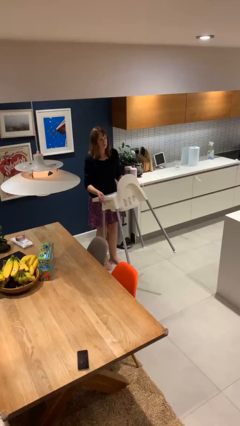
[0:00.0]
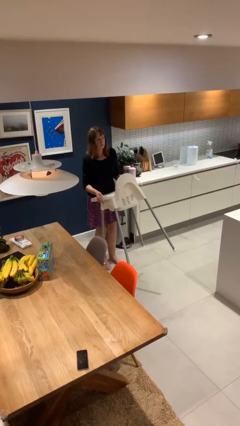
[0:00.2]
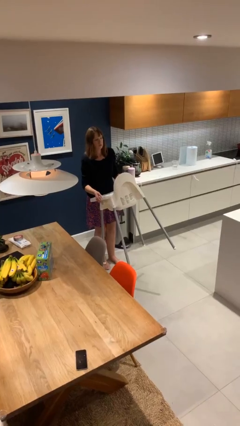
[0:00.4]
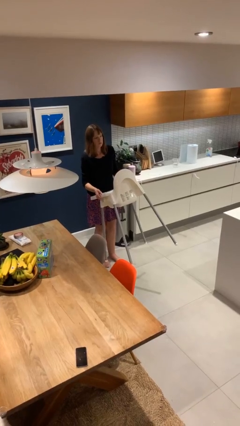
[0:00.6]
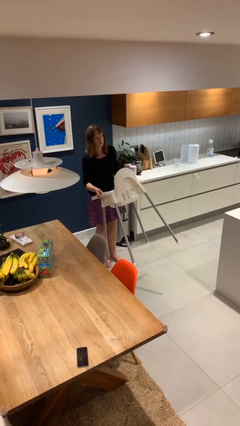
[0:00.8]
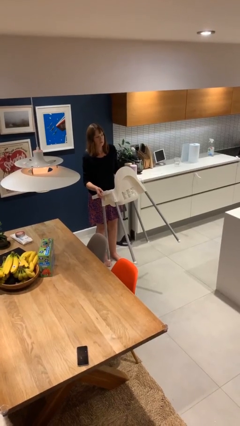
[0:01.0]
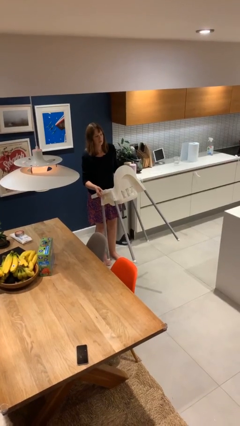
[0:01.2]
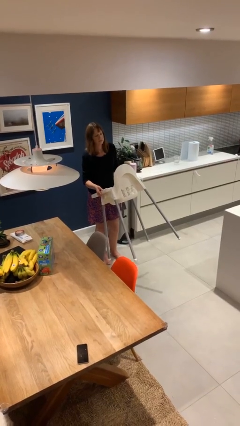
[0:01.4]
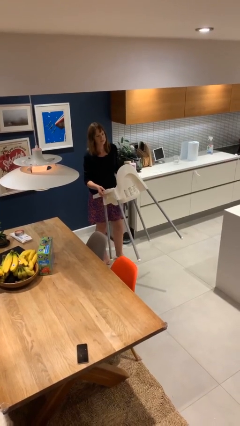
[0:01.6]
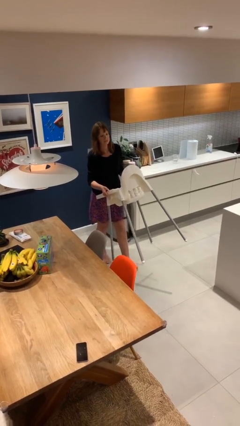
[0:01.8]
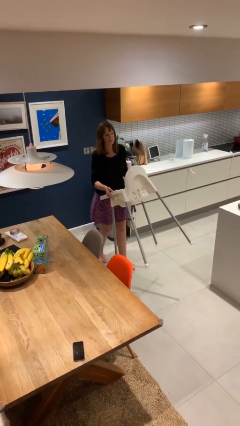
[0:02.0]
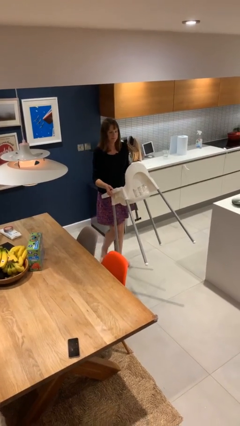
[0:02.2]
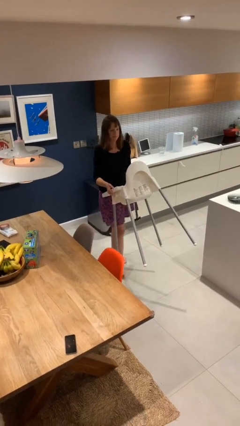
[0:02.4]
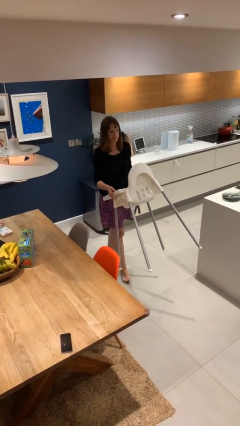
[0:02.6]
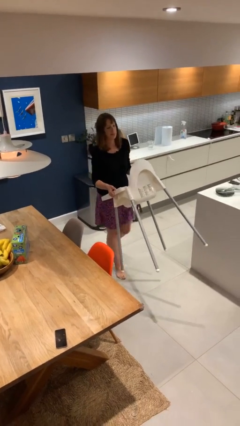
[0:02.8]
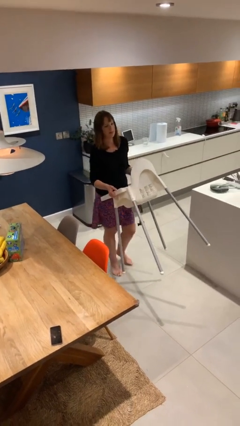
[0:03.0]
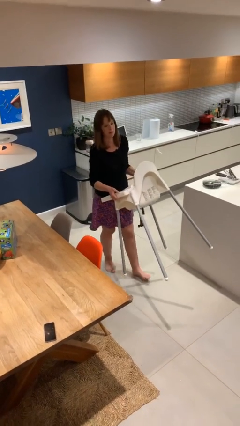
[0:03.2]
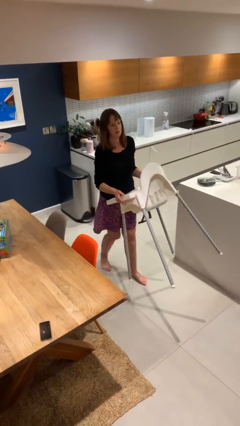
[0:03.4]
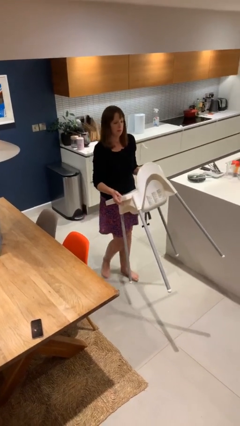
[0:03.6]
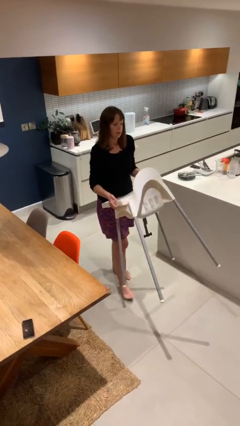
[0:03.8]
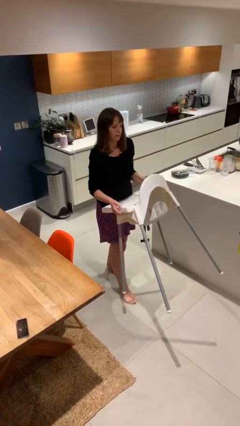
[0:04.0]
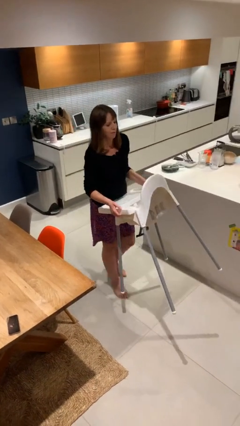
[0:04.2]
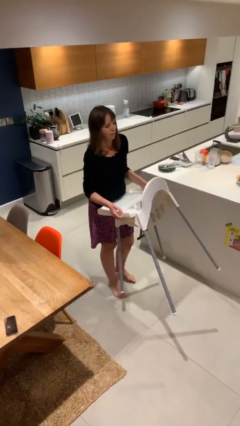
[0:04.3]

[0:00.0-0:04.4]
person carries heavy object

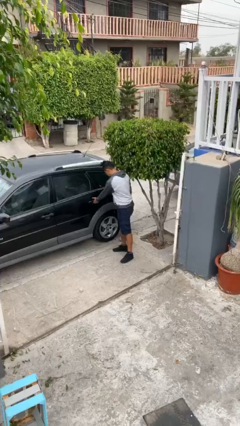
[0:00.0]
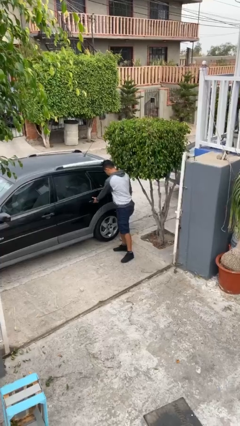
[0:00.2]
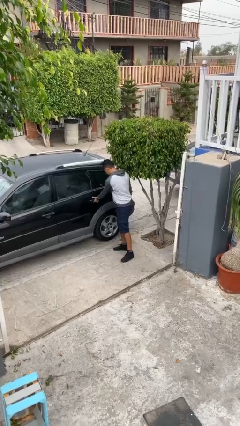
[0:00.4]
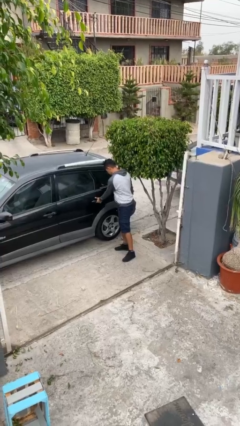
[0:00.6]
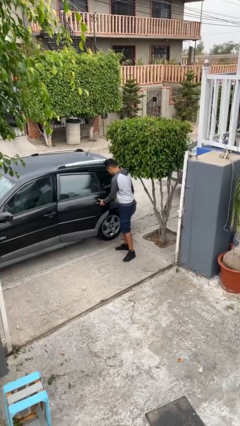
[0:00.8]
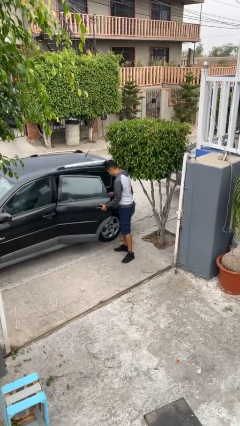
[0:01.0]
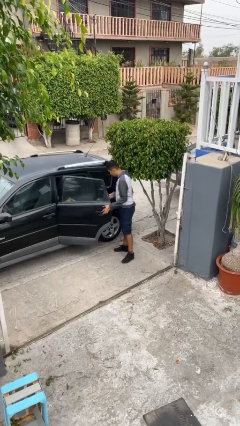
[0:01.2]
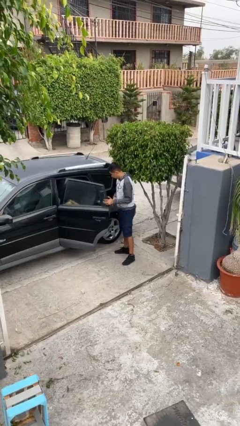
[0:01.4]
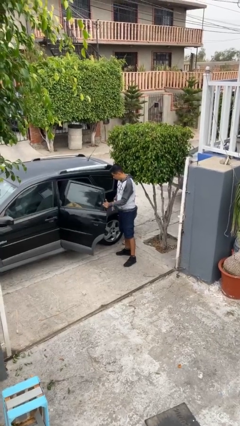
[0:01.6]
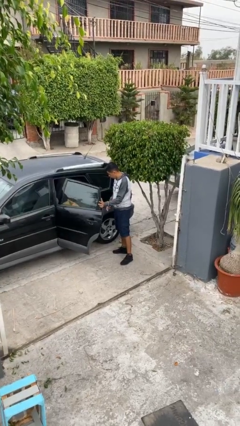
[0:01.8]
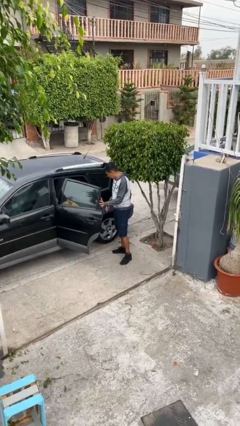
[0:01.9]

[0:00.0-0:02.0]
person opens car door

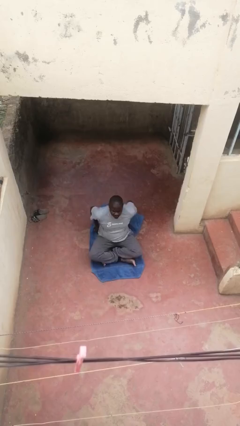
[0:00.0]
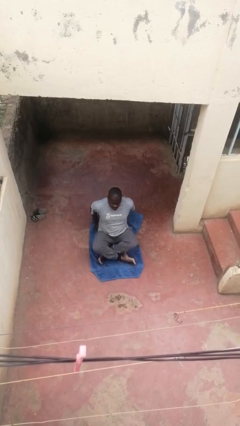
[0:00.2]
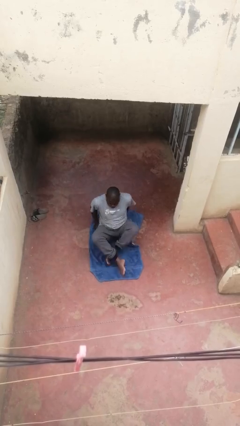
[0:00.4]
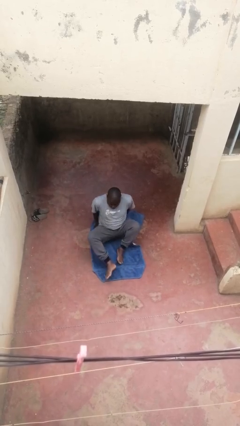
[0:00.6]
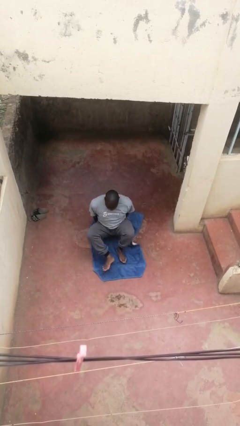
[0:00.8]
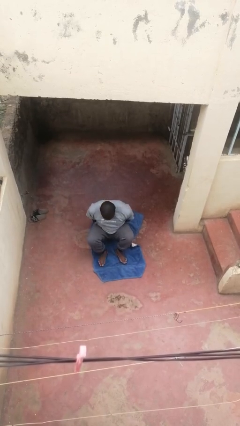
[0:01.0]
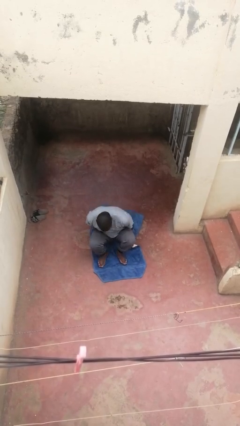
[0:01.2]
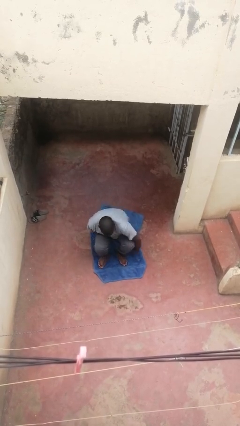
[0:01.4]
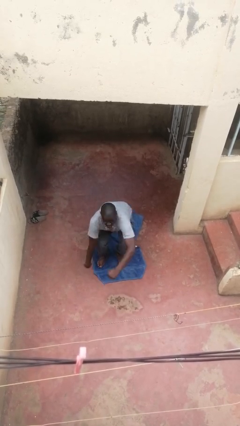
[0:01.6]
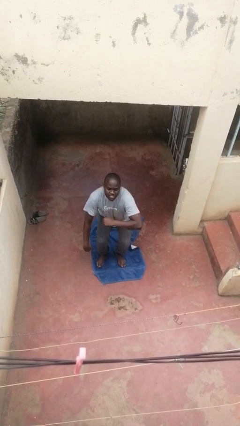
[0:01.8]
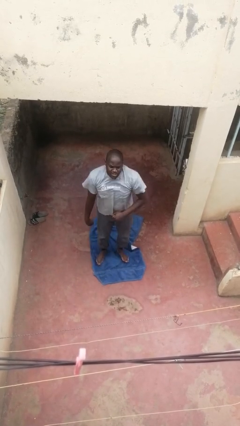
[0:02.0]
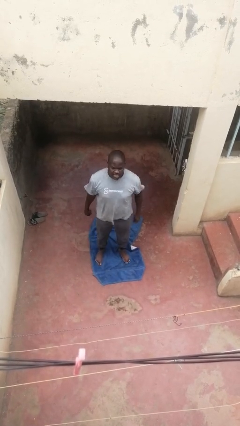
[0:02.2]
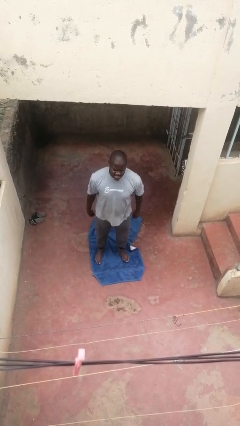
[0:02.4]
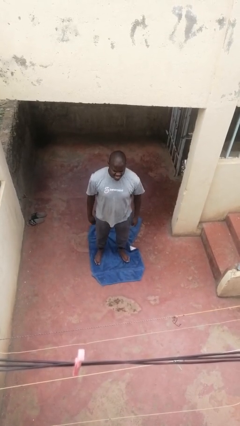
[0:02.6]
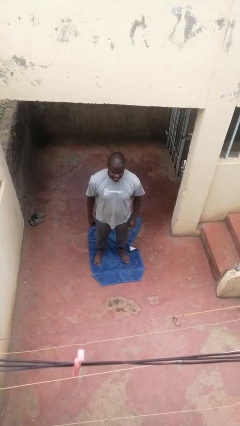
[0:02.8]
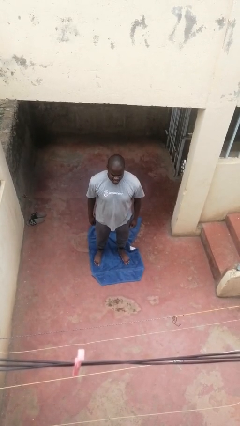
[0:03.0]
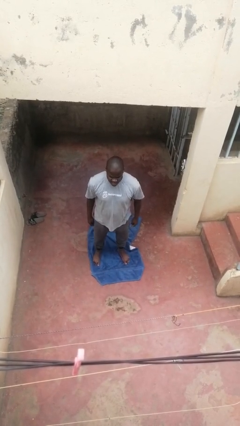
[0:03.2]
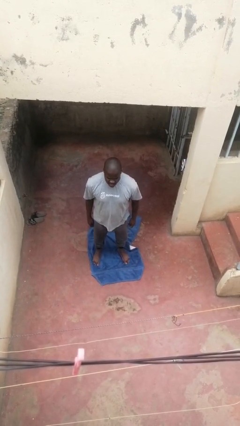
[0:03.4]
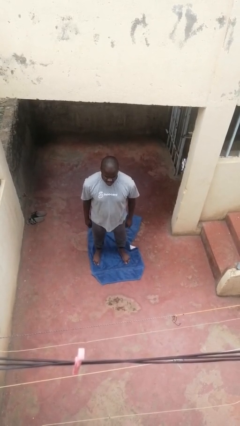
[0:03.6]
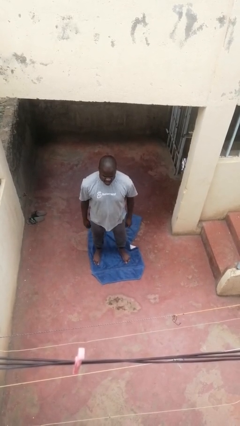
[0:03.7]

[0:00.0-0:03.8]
person stands up from floor

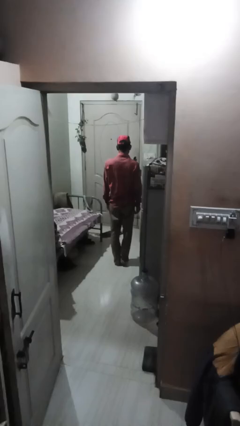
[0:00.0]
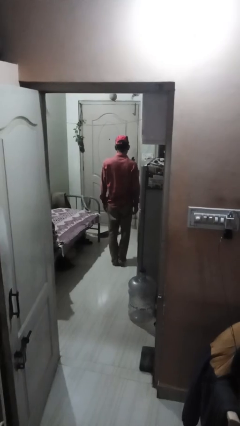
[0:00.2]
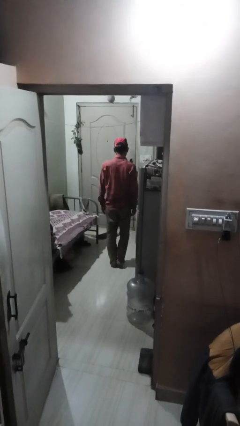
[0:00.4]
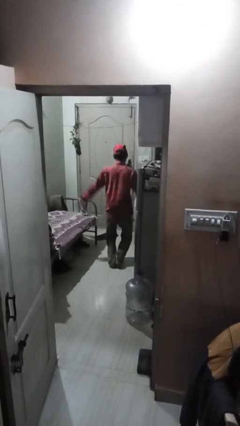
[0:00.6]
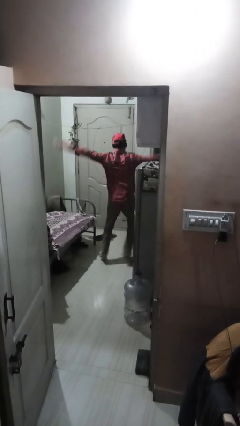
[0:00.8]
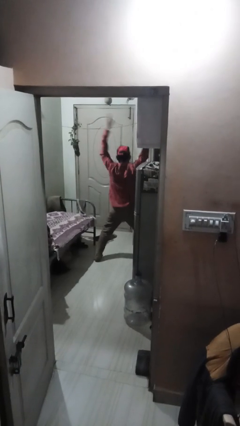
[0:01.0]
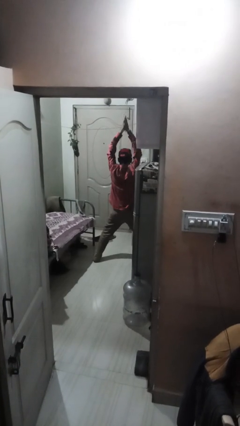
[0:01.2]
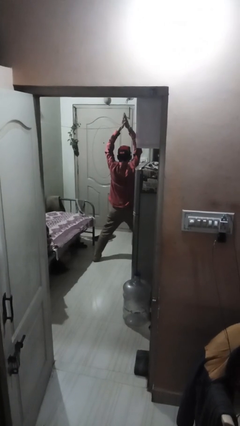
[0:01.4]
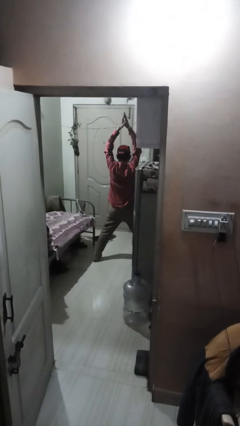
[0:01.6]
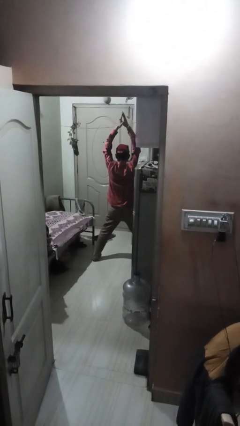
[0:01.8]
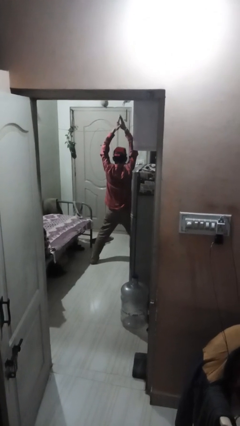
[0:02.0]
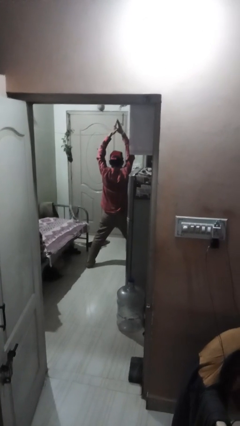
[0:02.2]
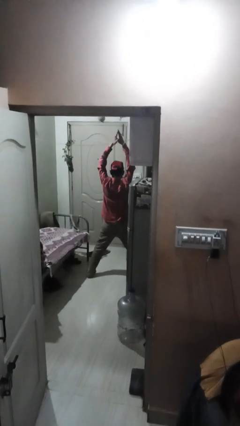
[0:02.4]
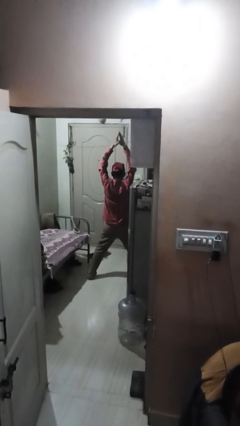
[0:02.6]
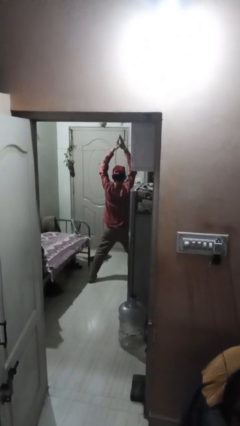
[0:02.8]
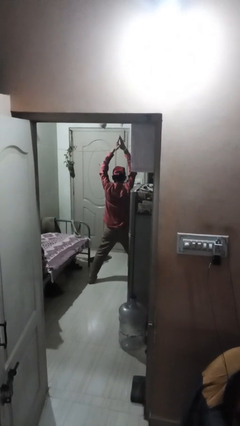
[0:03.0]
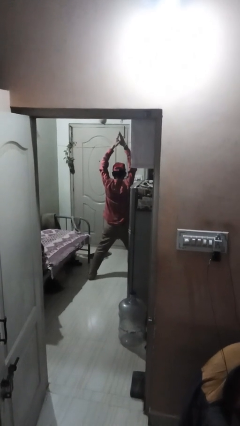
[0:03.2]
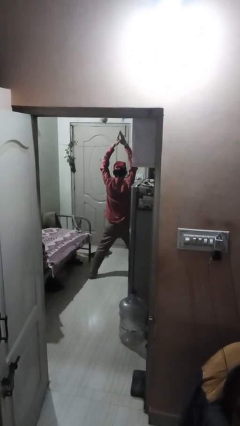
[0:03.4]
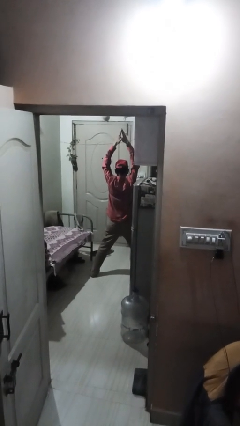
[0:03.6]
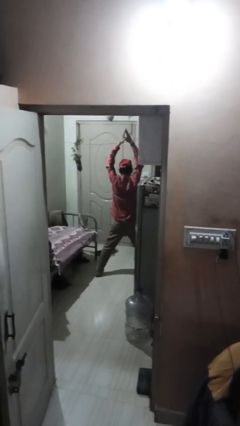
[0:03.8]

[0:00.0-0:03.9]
person exercises with jumping jacks

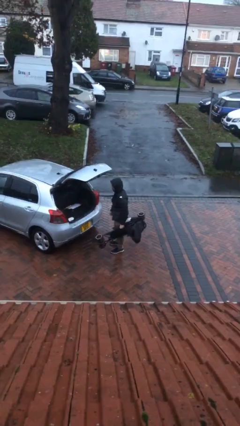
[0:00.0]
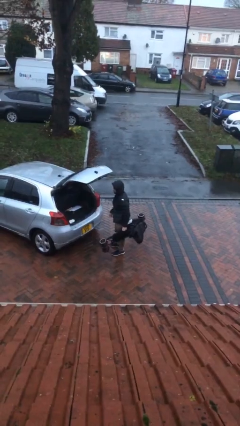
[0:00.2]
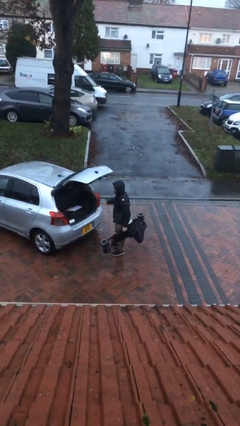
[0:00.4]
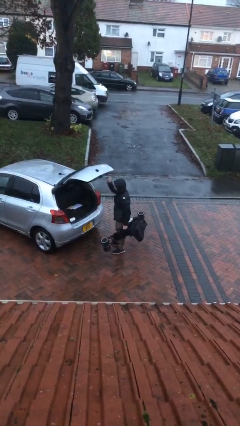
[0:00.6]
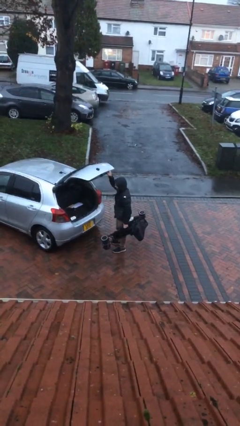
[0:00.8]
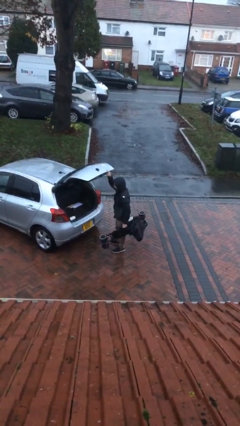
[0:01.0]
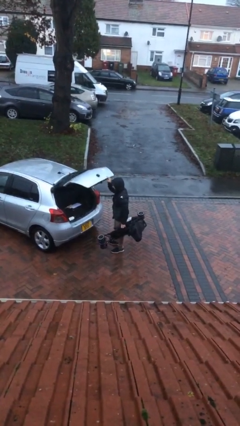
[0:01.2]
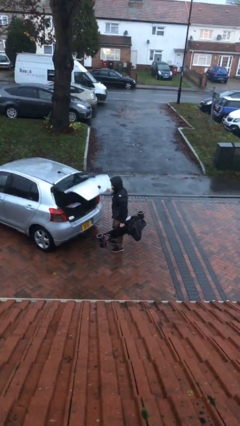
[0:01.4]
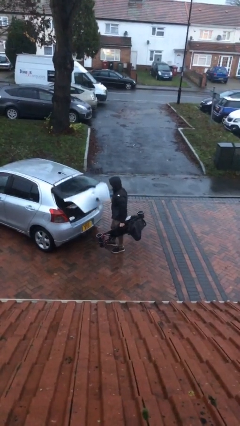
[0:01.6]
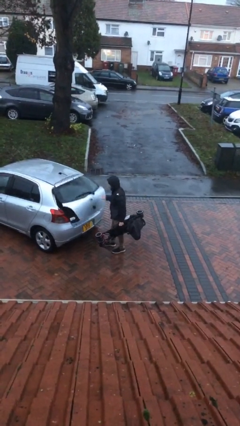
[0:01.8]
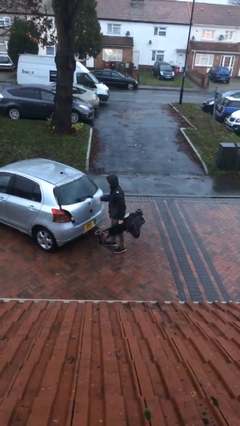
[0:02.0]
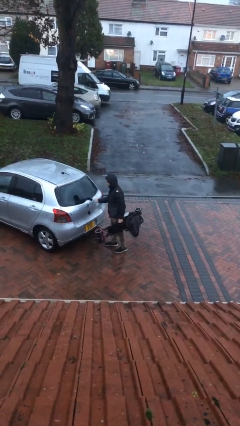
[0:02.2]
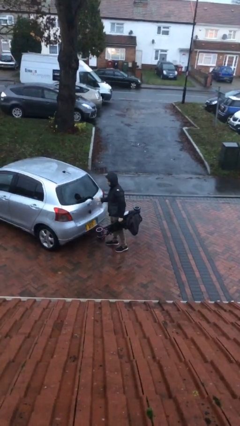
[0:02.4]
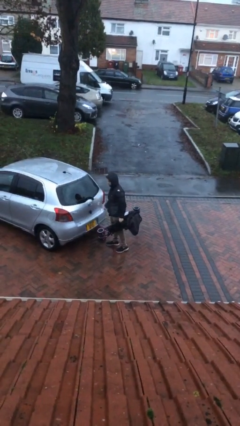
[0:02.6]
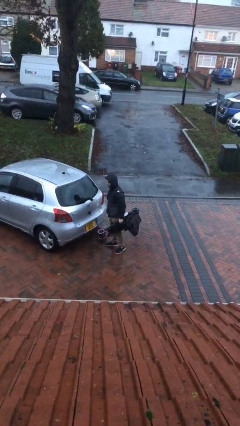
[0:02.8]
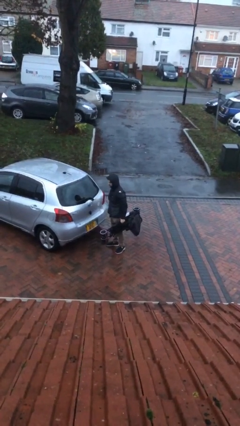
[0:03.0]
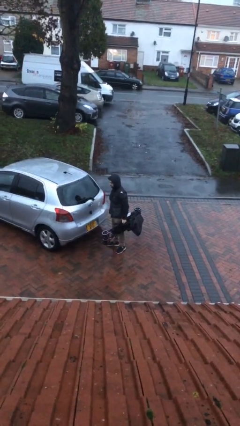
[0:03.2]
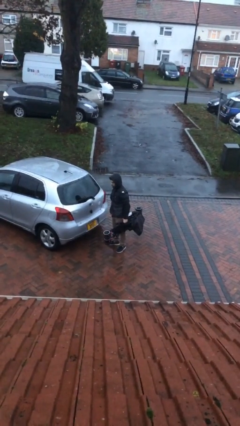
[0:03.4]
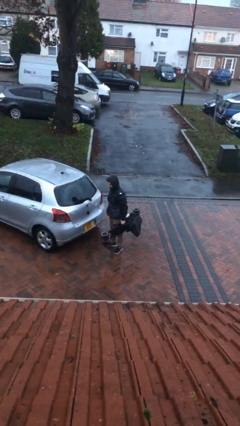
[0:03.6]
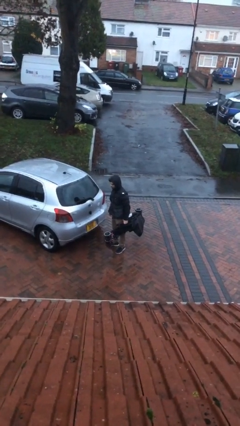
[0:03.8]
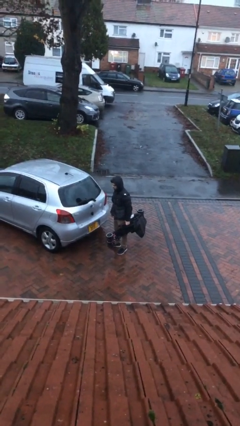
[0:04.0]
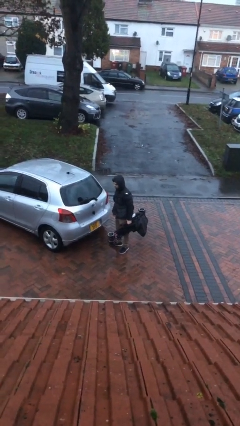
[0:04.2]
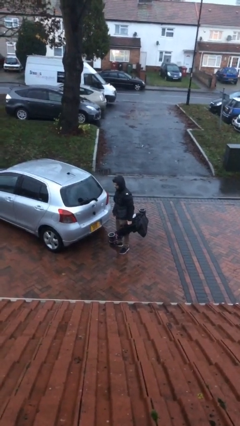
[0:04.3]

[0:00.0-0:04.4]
person closes car trunk
